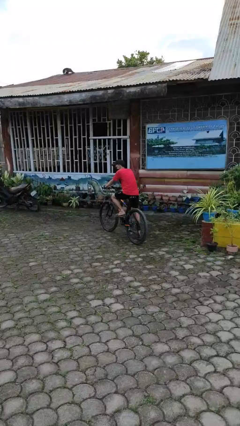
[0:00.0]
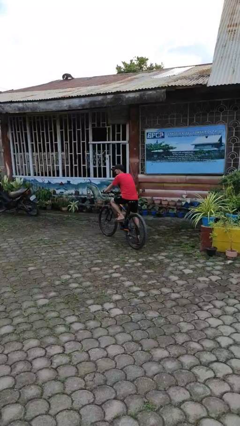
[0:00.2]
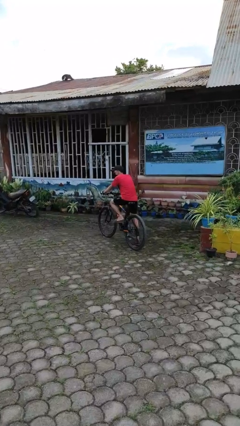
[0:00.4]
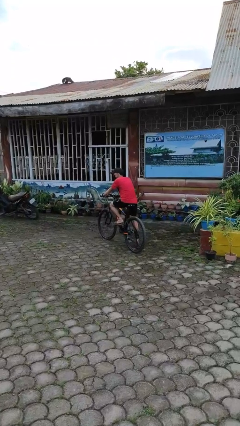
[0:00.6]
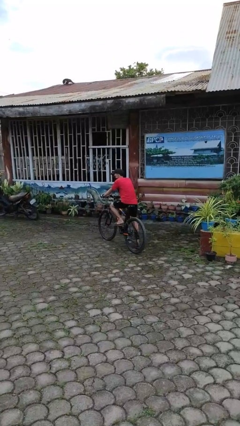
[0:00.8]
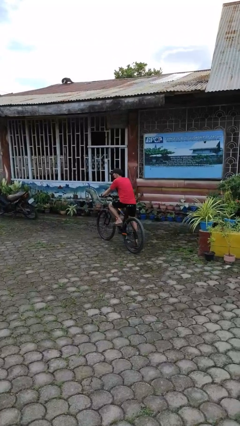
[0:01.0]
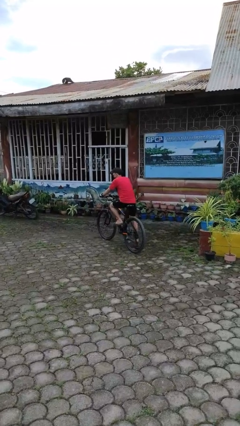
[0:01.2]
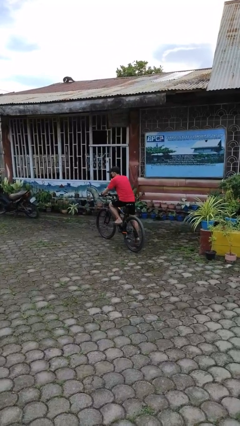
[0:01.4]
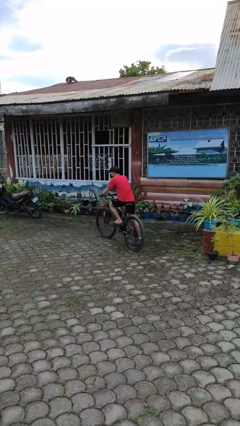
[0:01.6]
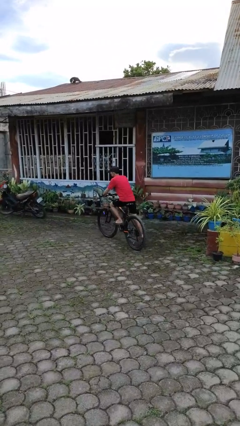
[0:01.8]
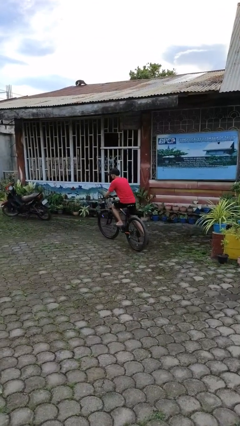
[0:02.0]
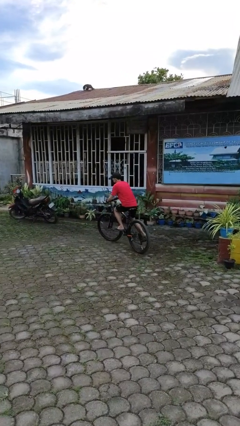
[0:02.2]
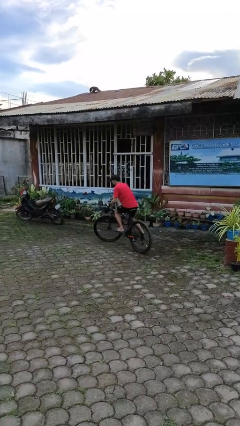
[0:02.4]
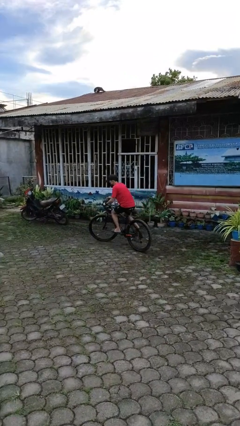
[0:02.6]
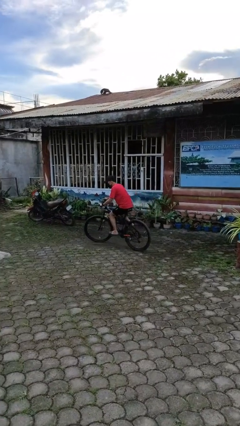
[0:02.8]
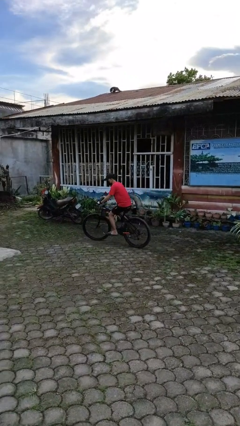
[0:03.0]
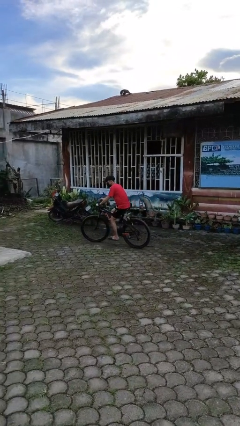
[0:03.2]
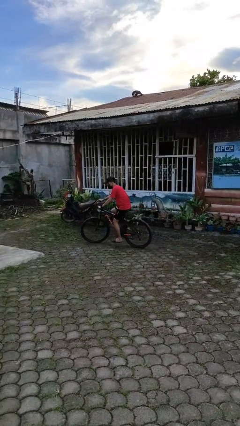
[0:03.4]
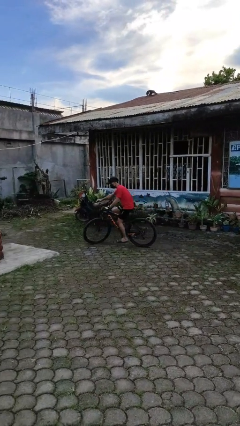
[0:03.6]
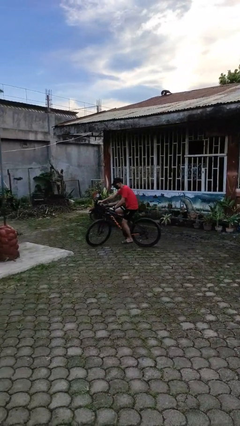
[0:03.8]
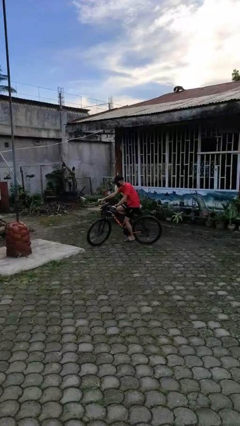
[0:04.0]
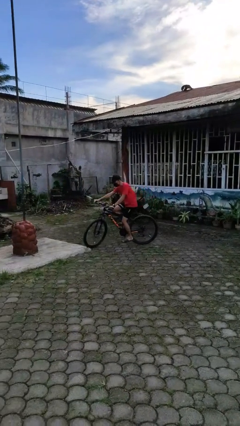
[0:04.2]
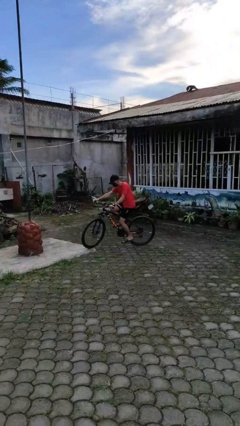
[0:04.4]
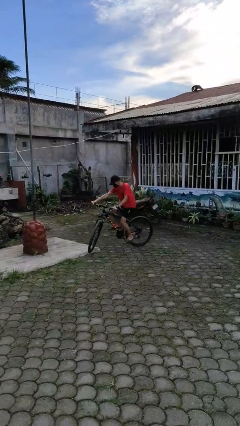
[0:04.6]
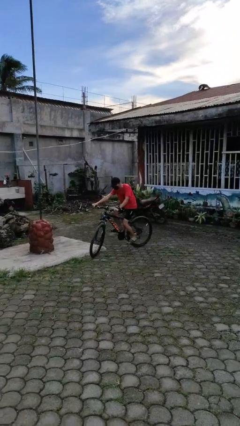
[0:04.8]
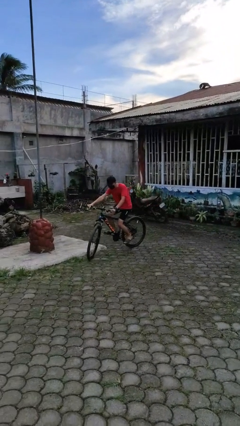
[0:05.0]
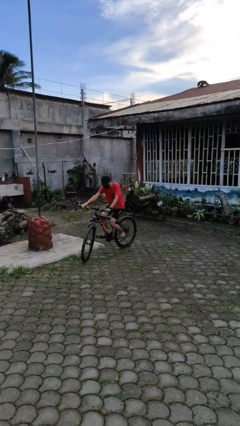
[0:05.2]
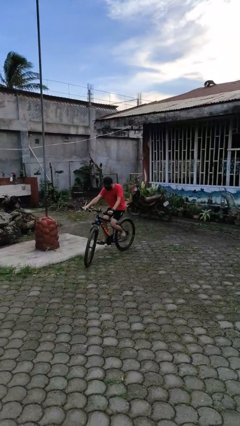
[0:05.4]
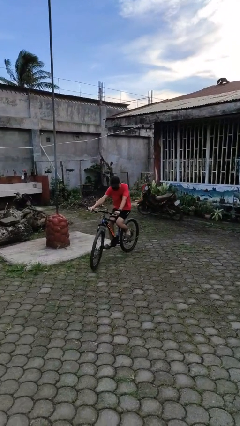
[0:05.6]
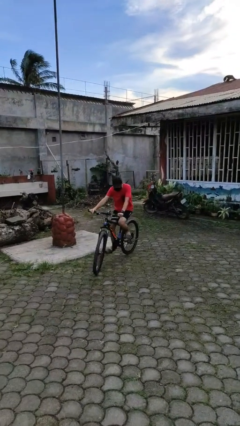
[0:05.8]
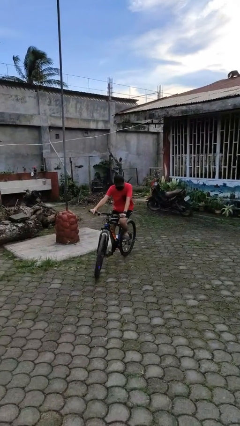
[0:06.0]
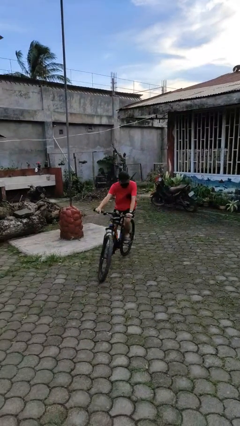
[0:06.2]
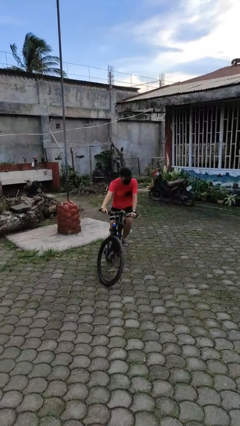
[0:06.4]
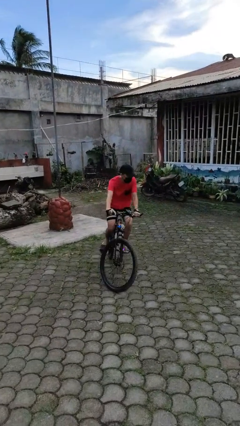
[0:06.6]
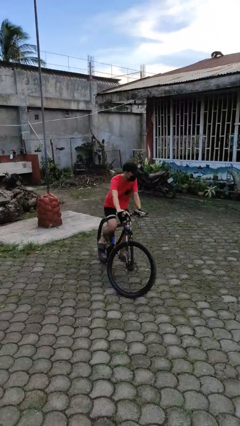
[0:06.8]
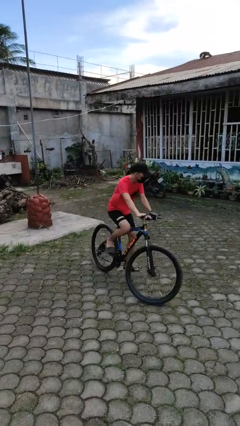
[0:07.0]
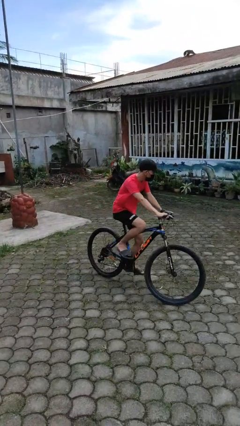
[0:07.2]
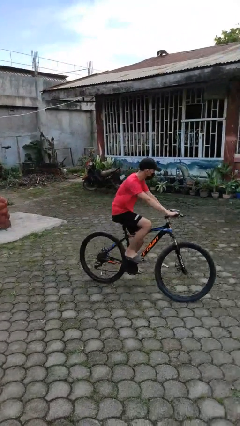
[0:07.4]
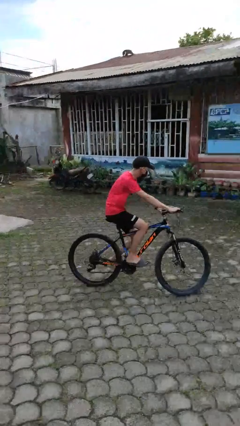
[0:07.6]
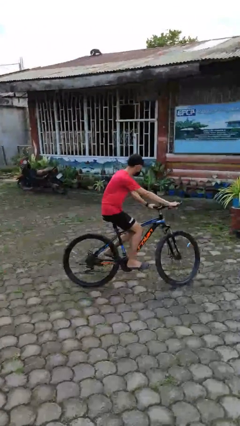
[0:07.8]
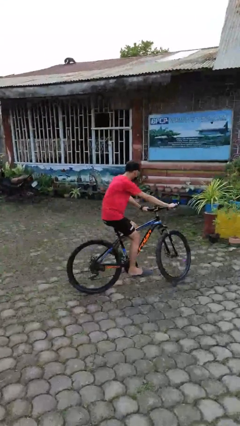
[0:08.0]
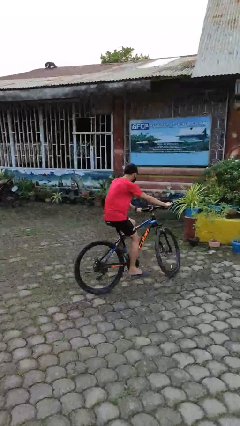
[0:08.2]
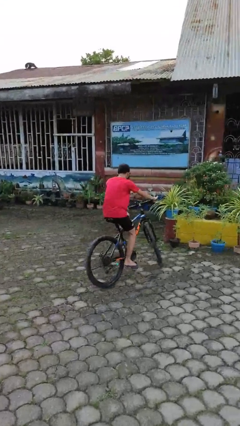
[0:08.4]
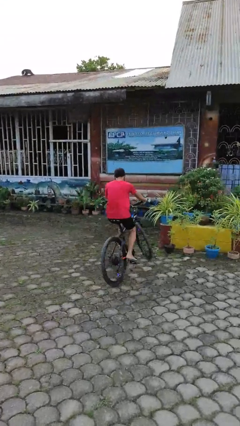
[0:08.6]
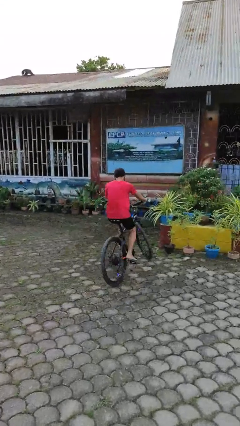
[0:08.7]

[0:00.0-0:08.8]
person rides bicycle

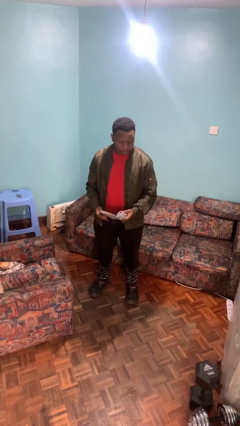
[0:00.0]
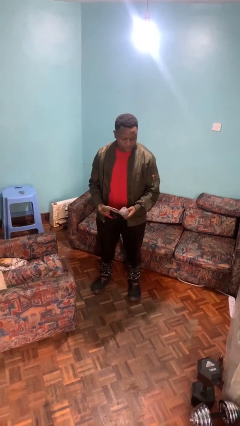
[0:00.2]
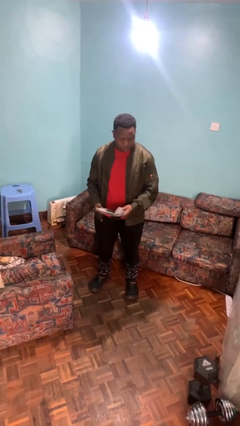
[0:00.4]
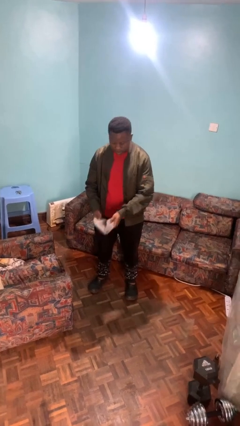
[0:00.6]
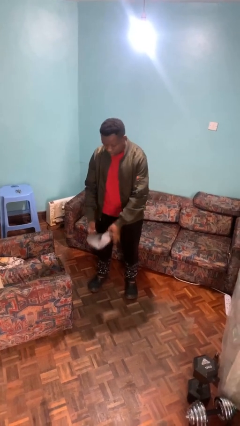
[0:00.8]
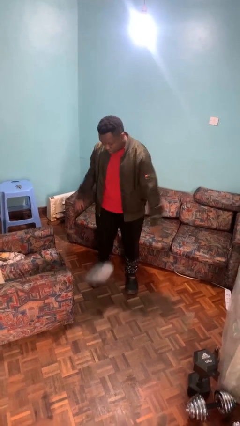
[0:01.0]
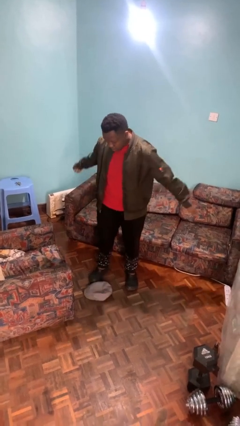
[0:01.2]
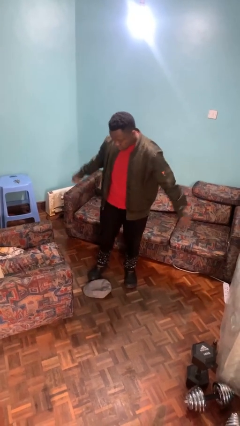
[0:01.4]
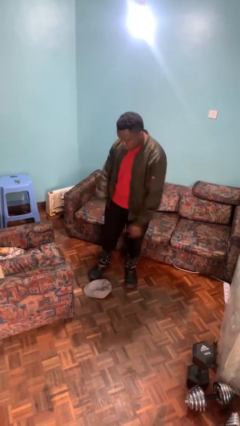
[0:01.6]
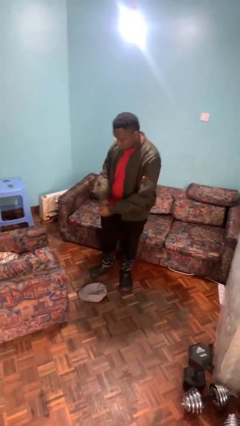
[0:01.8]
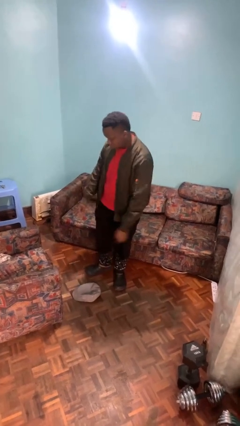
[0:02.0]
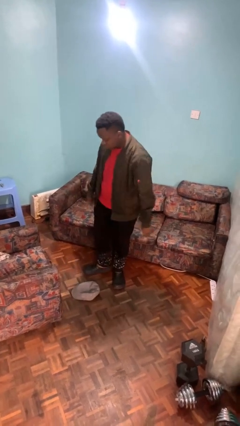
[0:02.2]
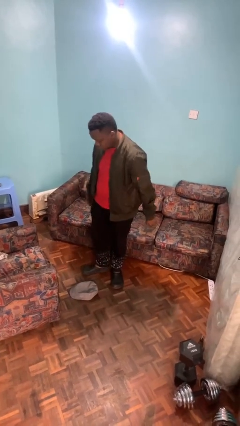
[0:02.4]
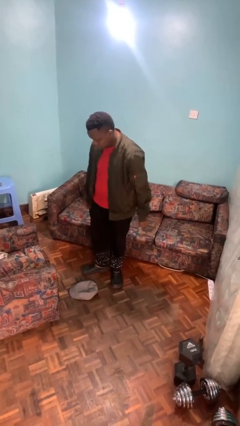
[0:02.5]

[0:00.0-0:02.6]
person drops object

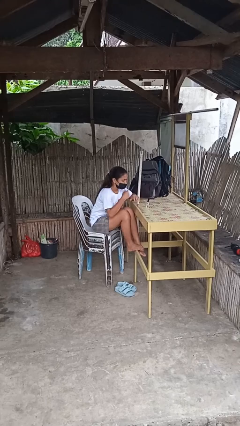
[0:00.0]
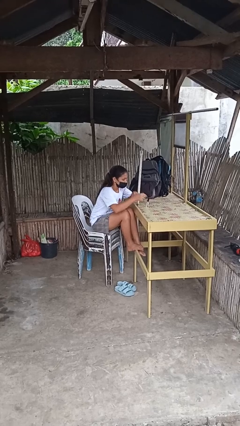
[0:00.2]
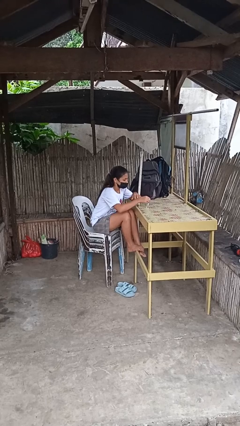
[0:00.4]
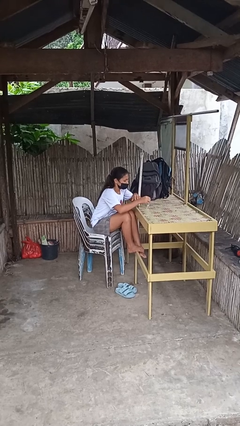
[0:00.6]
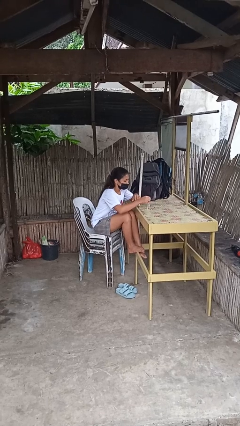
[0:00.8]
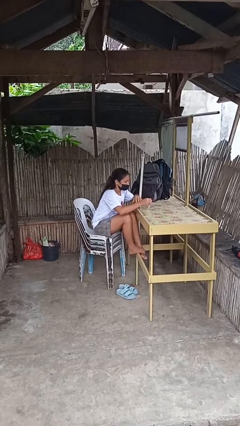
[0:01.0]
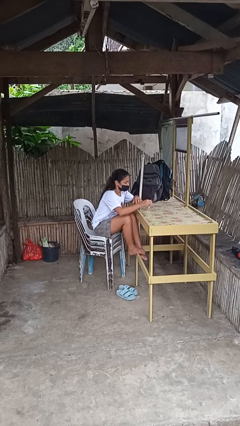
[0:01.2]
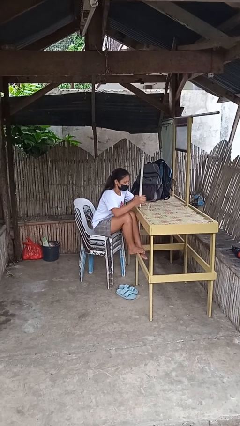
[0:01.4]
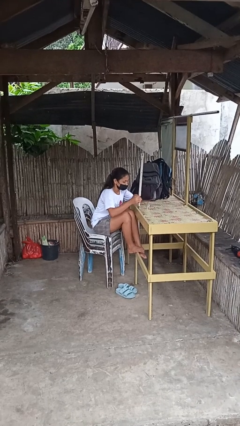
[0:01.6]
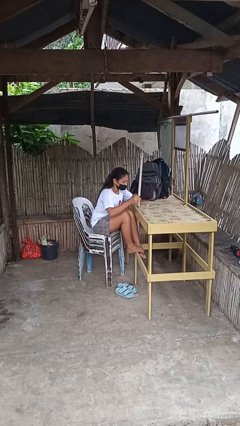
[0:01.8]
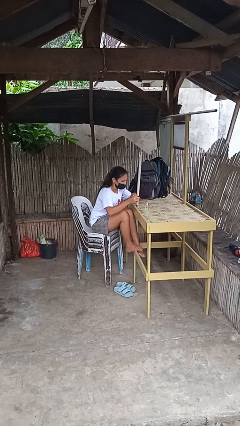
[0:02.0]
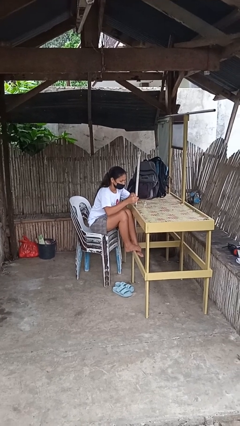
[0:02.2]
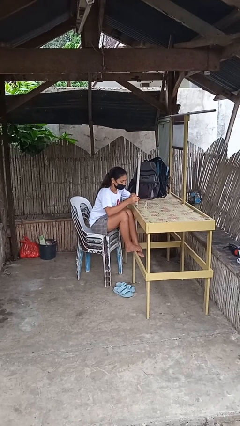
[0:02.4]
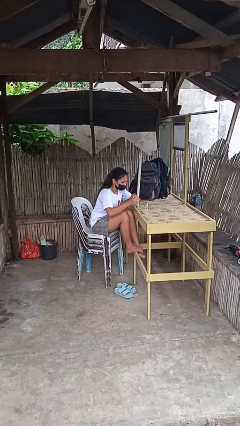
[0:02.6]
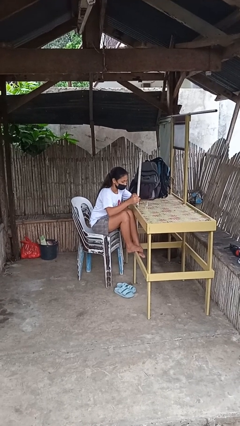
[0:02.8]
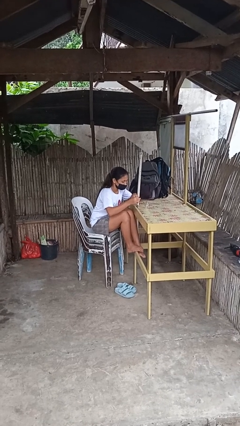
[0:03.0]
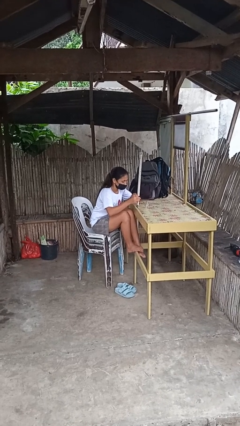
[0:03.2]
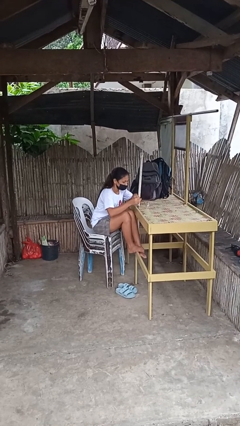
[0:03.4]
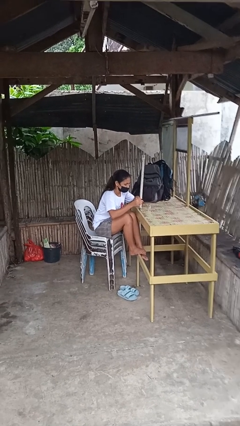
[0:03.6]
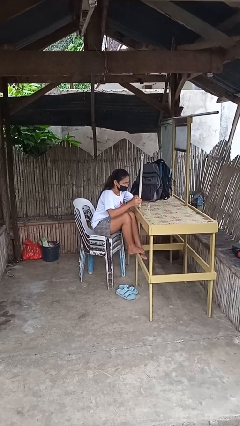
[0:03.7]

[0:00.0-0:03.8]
person paints fingernails

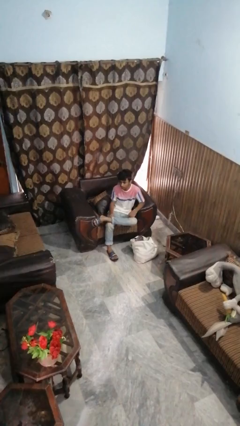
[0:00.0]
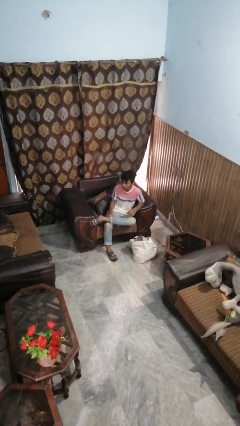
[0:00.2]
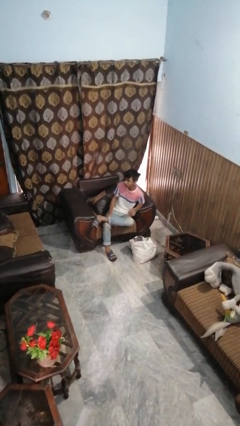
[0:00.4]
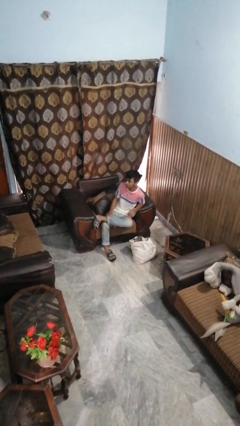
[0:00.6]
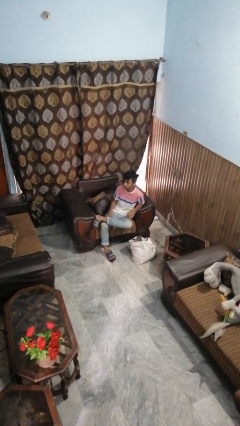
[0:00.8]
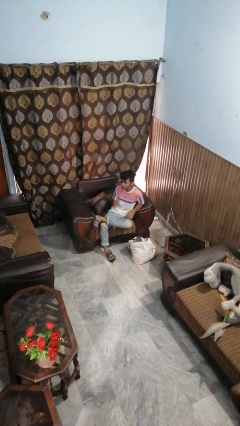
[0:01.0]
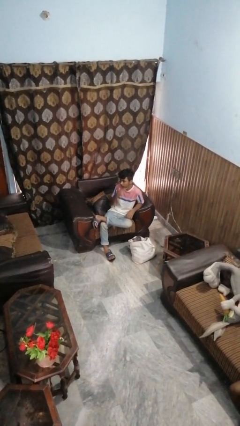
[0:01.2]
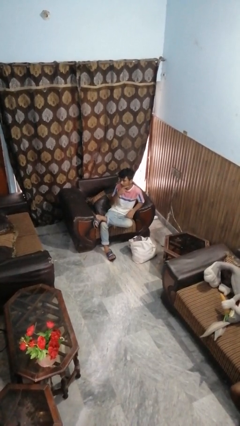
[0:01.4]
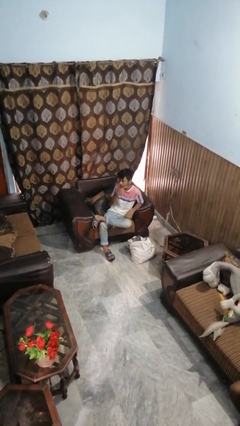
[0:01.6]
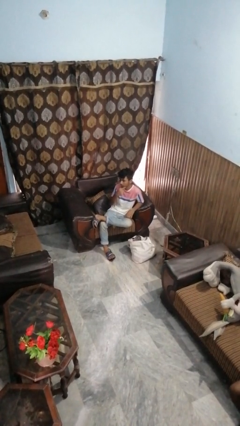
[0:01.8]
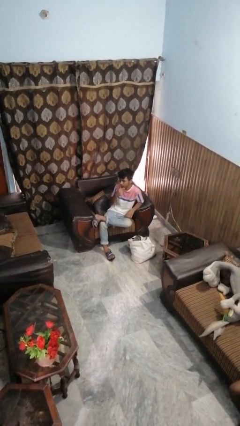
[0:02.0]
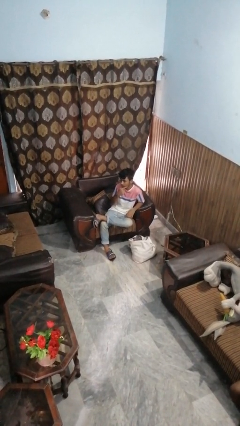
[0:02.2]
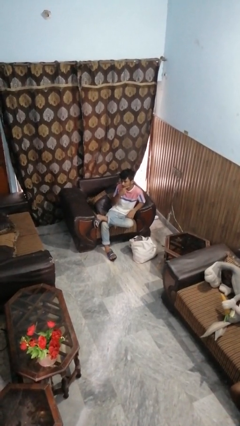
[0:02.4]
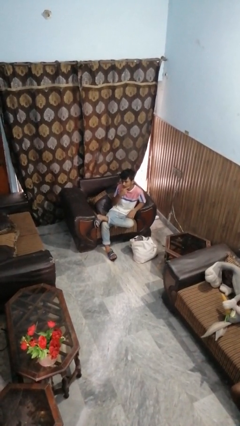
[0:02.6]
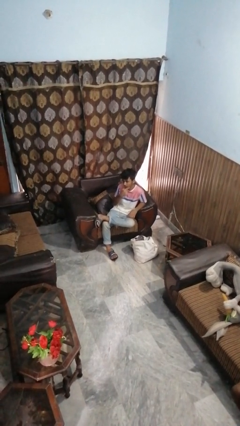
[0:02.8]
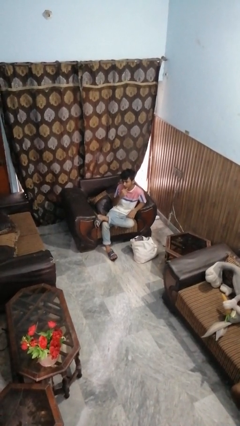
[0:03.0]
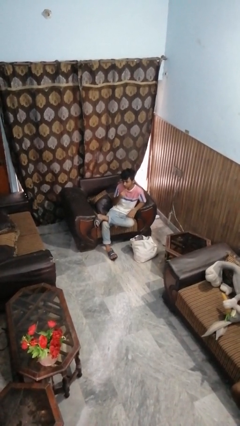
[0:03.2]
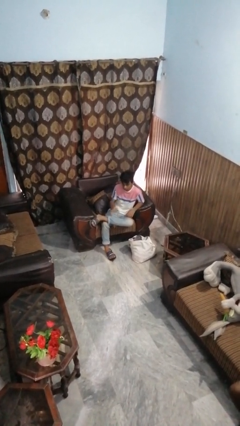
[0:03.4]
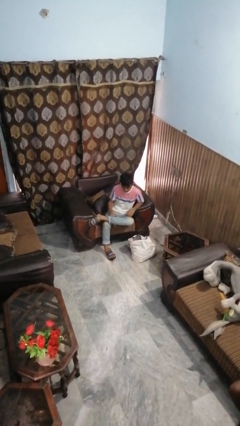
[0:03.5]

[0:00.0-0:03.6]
person strokes chin
